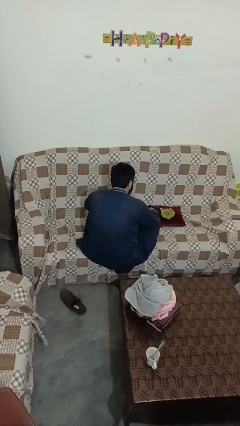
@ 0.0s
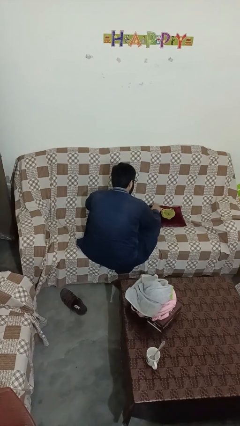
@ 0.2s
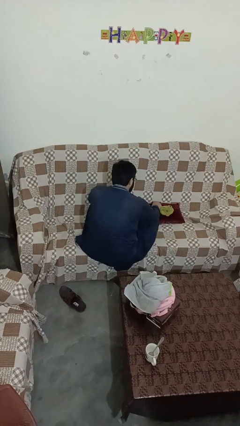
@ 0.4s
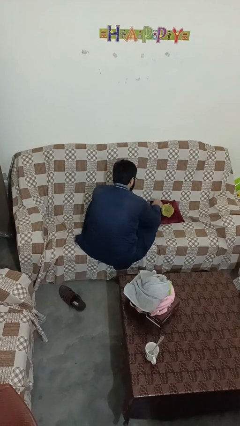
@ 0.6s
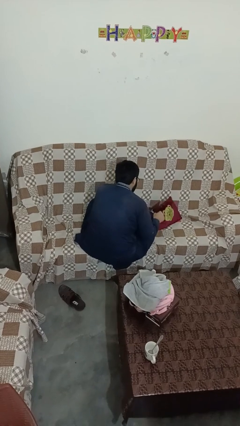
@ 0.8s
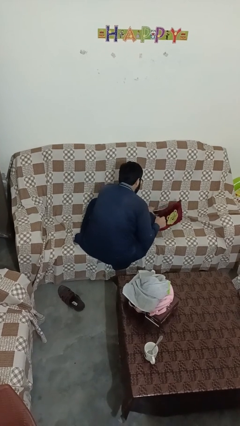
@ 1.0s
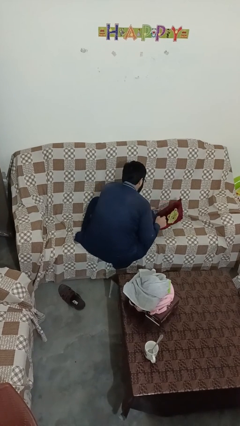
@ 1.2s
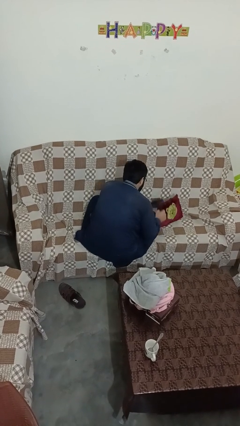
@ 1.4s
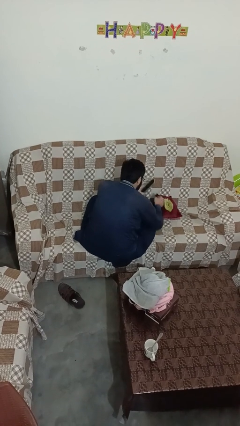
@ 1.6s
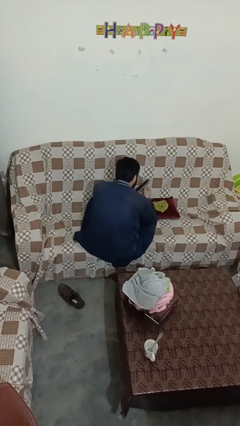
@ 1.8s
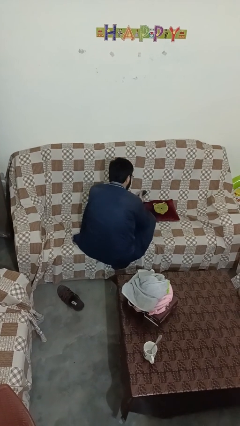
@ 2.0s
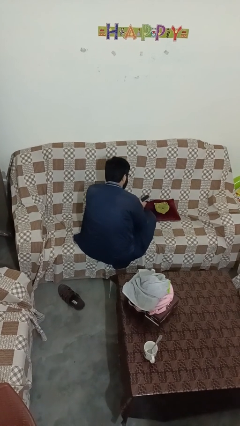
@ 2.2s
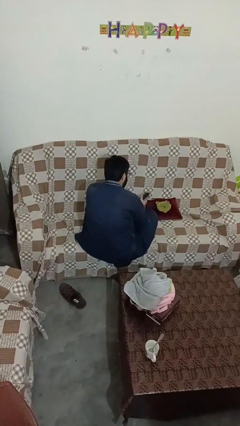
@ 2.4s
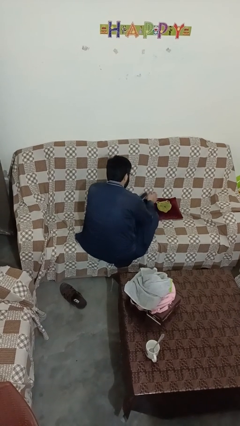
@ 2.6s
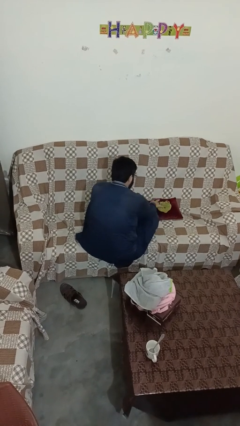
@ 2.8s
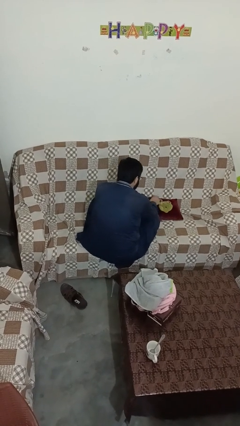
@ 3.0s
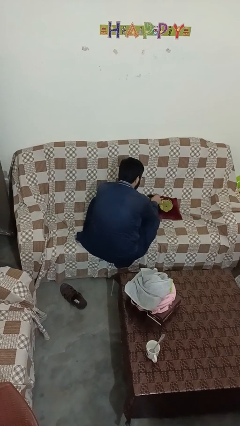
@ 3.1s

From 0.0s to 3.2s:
person searches in couch

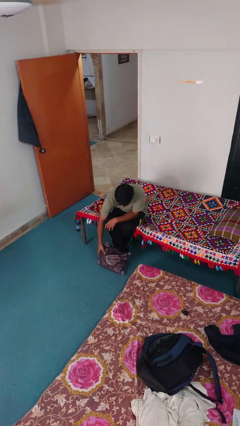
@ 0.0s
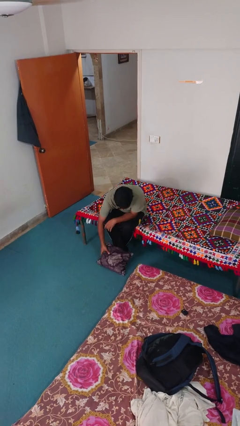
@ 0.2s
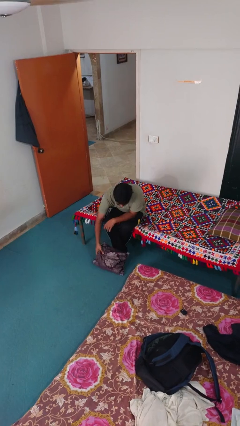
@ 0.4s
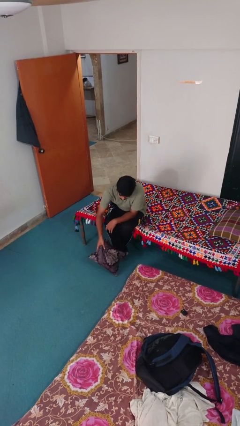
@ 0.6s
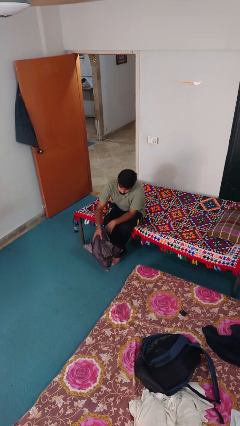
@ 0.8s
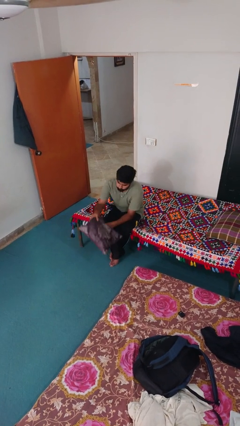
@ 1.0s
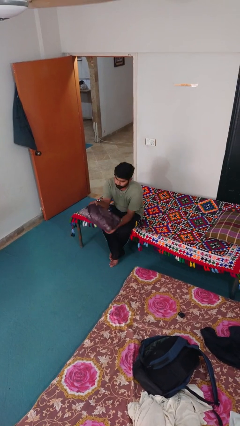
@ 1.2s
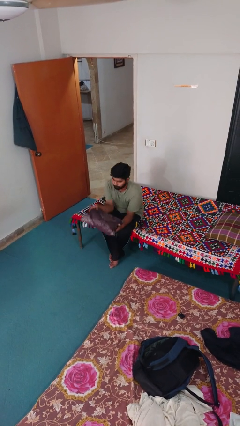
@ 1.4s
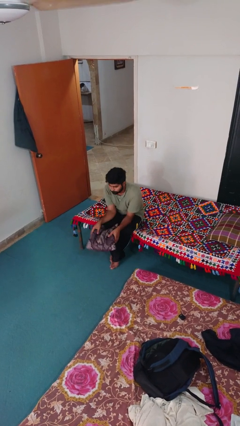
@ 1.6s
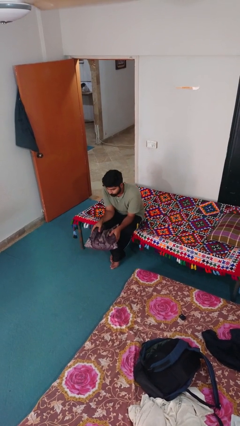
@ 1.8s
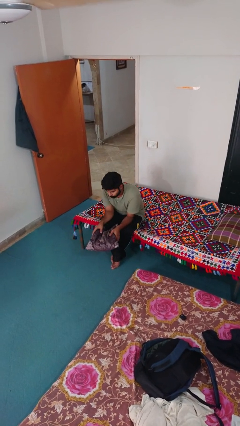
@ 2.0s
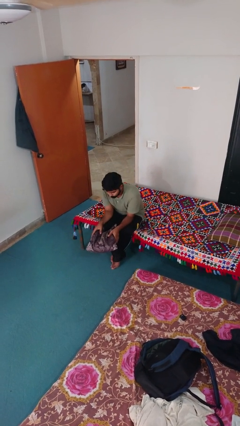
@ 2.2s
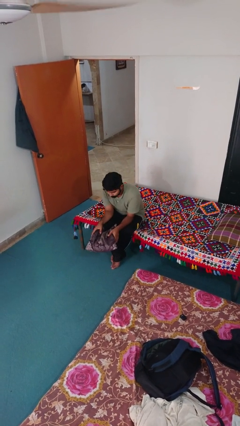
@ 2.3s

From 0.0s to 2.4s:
person picks up object from floor

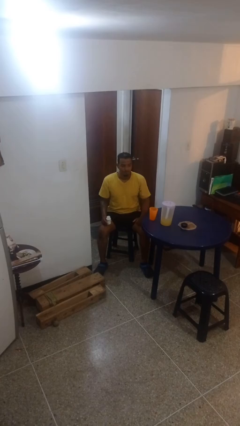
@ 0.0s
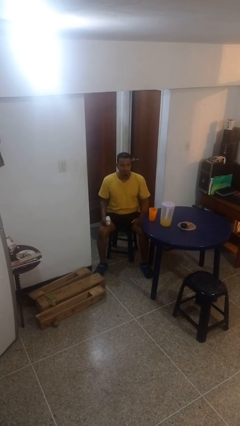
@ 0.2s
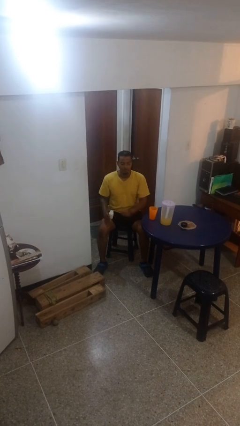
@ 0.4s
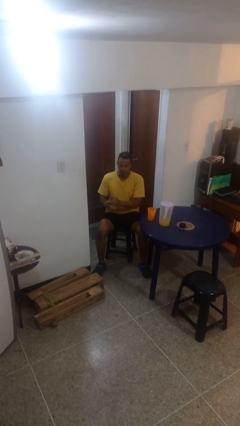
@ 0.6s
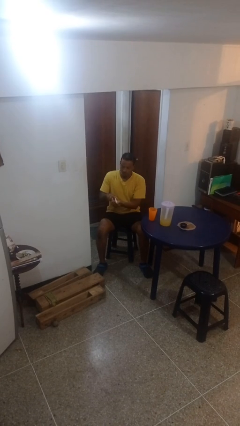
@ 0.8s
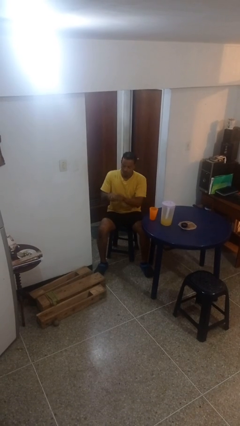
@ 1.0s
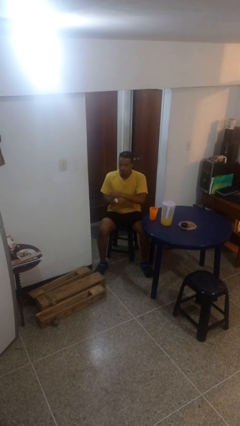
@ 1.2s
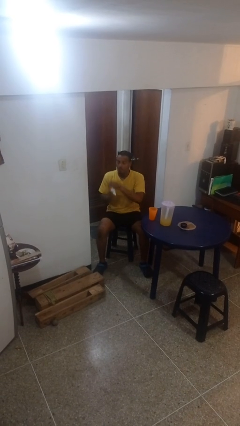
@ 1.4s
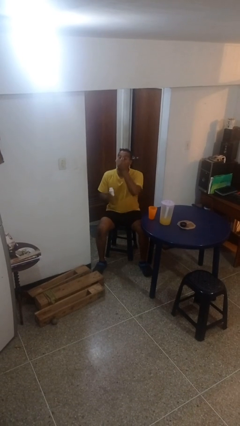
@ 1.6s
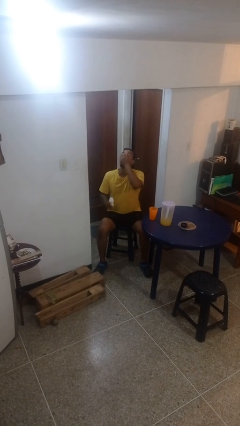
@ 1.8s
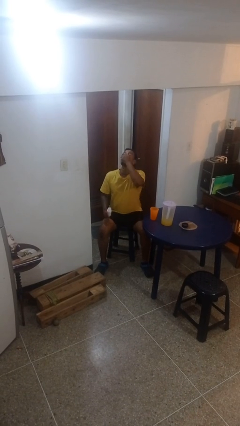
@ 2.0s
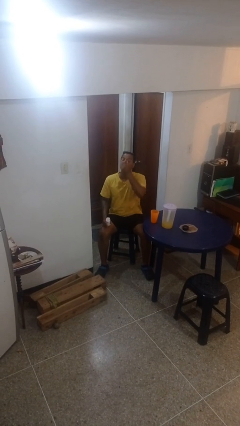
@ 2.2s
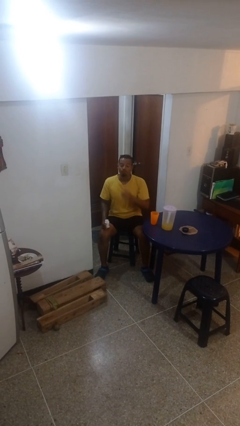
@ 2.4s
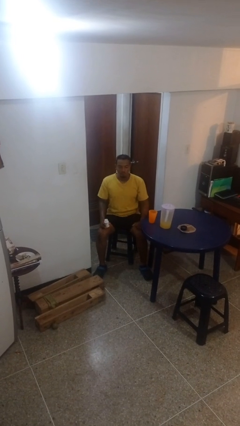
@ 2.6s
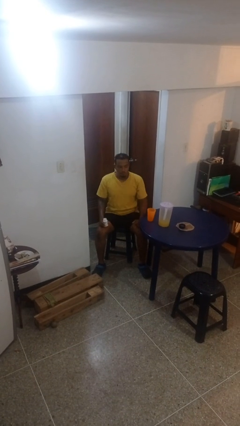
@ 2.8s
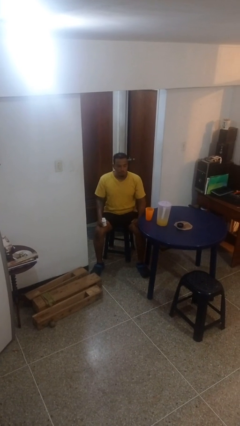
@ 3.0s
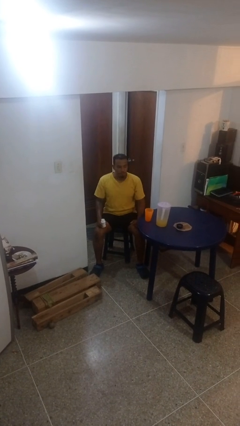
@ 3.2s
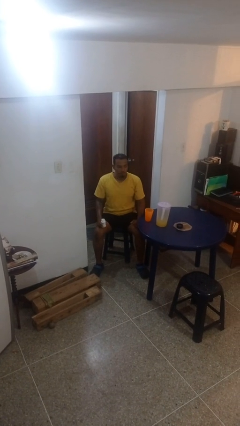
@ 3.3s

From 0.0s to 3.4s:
person takes medicine pills

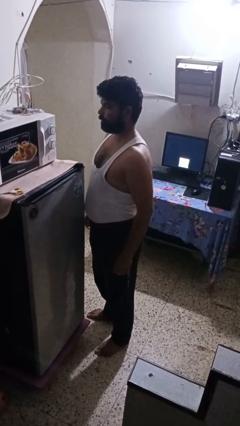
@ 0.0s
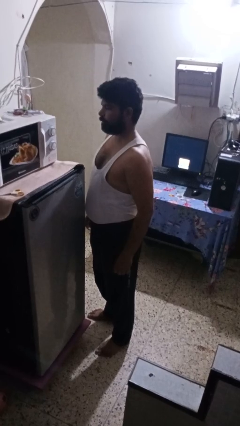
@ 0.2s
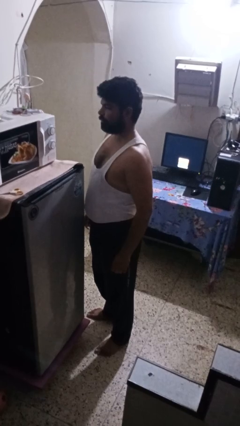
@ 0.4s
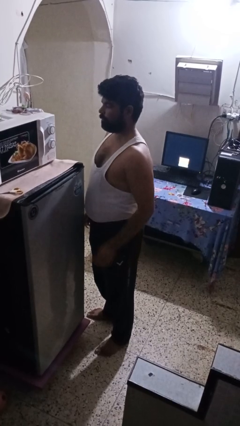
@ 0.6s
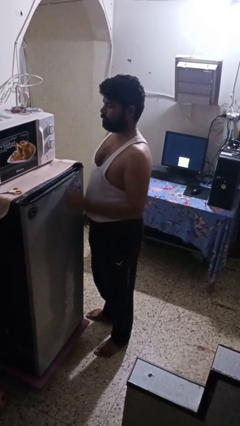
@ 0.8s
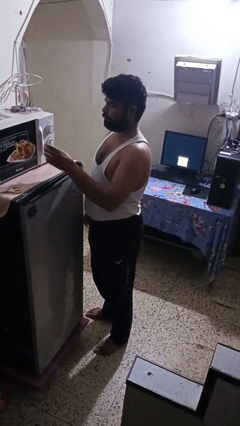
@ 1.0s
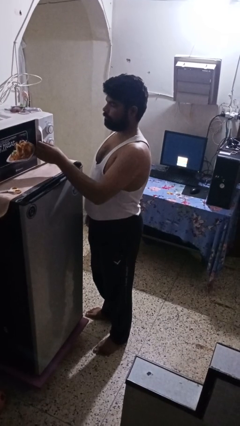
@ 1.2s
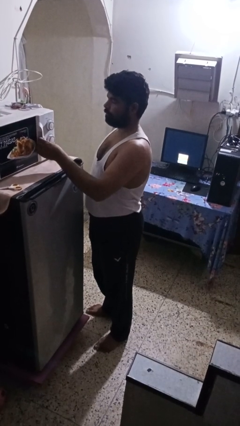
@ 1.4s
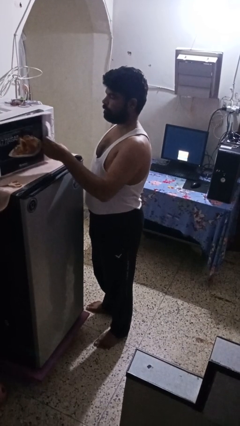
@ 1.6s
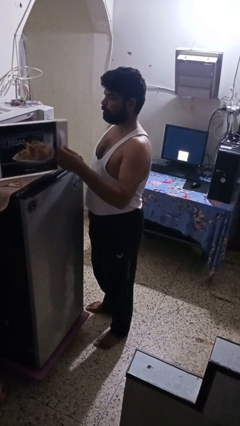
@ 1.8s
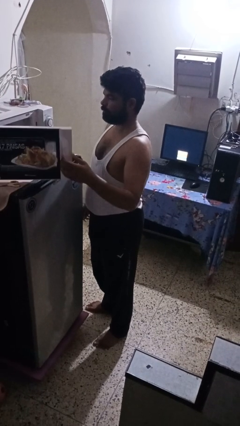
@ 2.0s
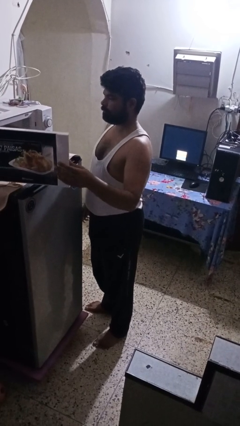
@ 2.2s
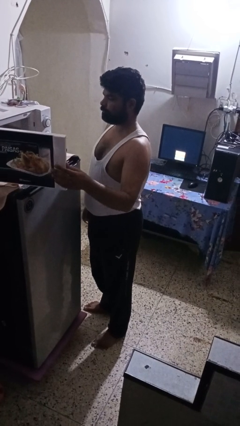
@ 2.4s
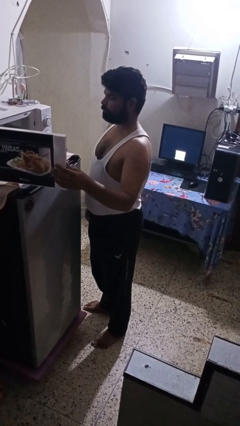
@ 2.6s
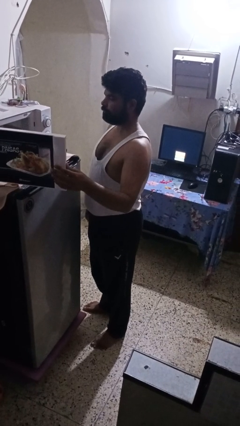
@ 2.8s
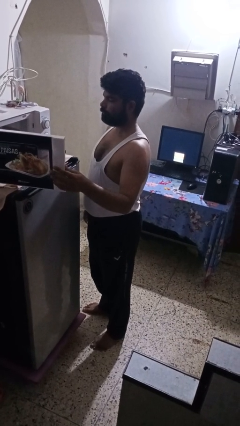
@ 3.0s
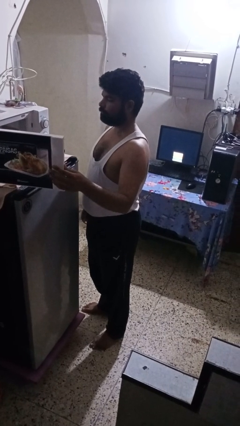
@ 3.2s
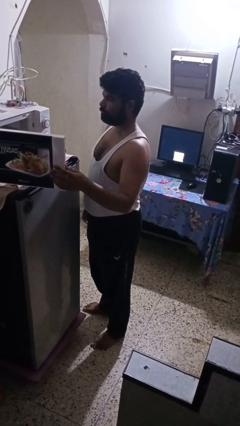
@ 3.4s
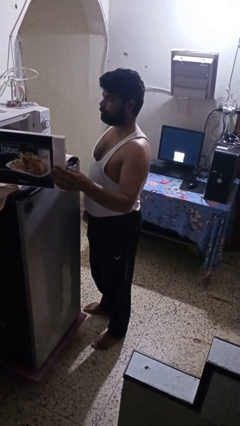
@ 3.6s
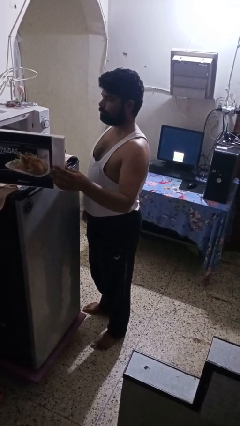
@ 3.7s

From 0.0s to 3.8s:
person opens microwave

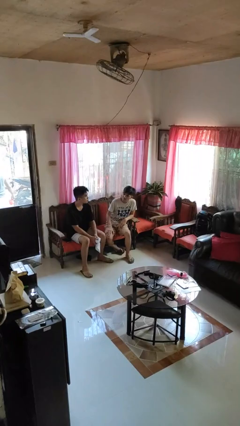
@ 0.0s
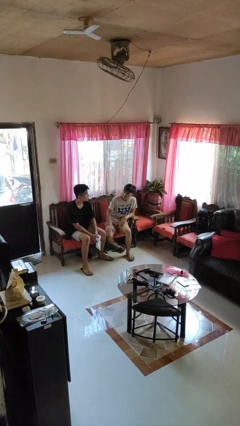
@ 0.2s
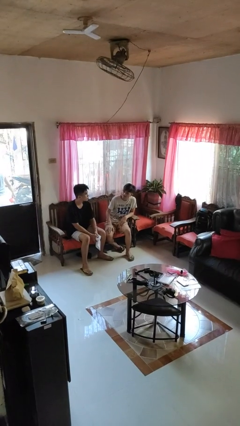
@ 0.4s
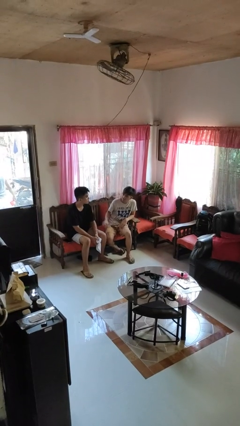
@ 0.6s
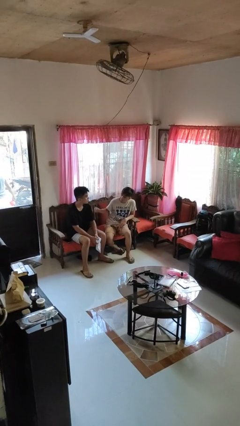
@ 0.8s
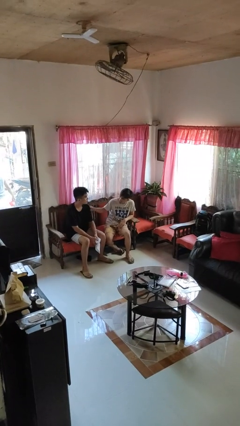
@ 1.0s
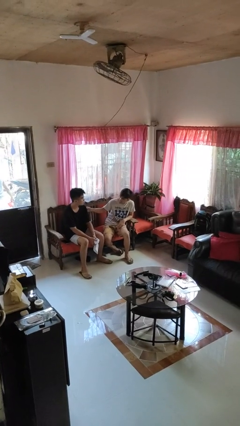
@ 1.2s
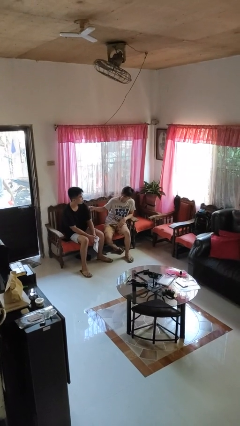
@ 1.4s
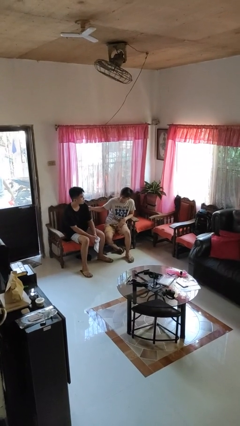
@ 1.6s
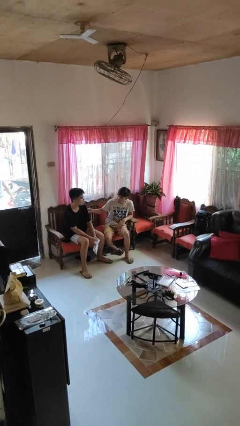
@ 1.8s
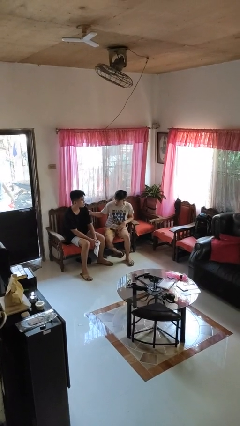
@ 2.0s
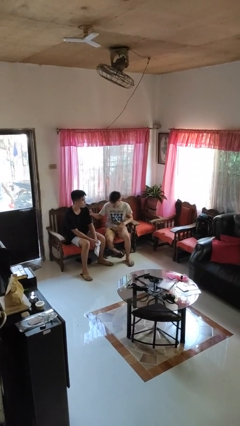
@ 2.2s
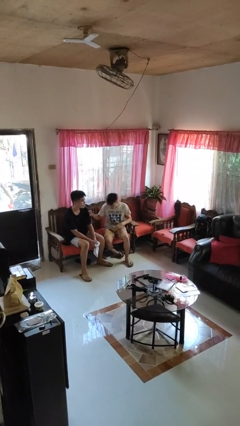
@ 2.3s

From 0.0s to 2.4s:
person pounds shoulders of person

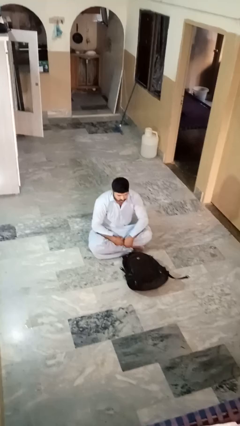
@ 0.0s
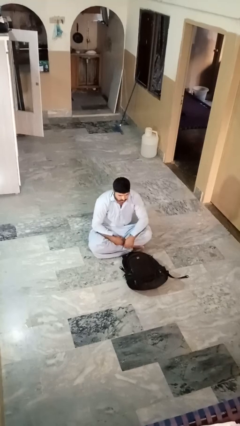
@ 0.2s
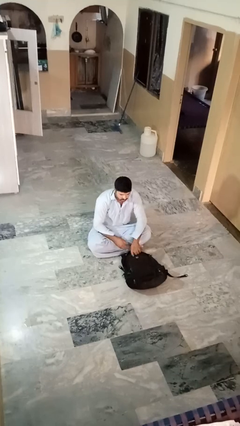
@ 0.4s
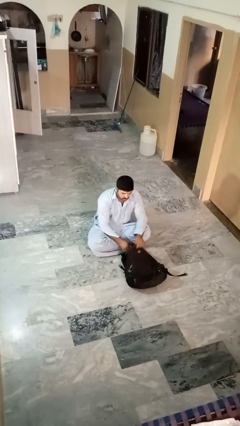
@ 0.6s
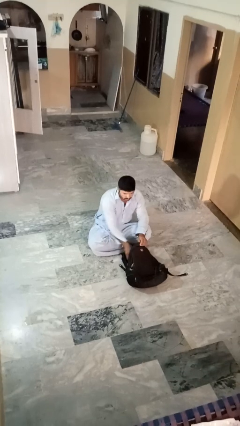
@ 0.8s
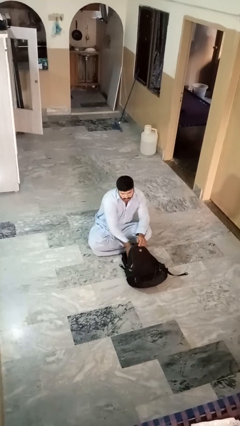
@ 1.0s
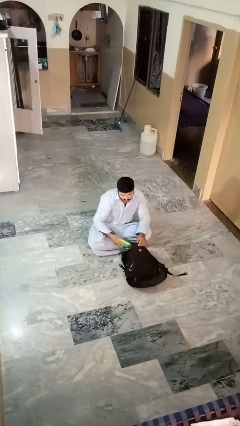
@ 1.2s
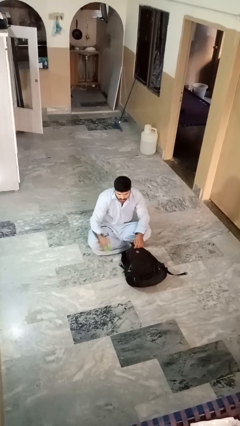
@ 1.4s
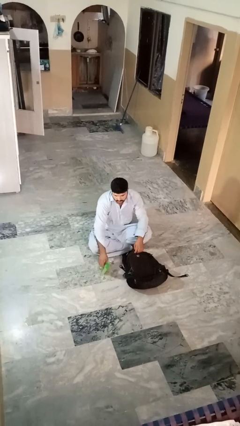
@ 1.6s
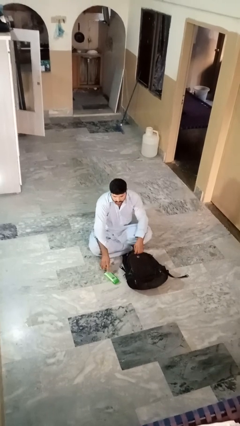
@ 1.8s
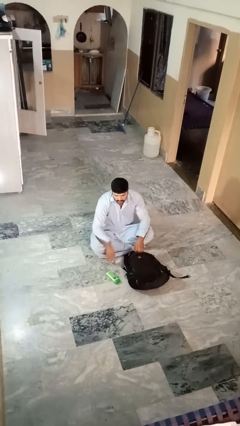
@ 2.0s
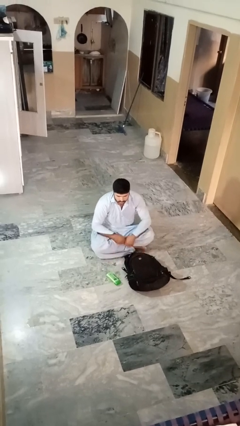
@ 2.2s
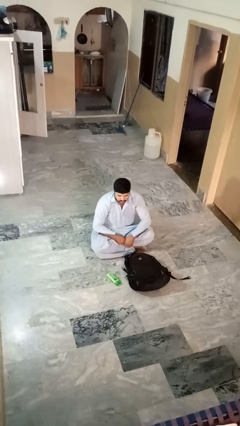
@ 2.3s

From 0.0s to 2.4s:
person takes object from bag
